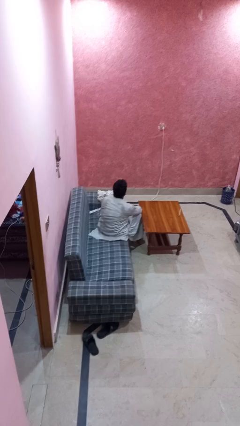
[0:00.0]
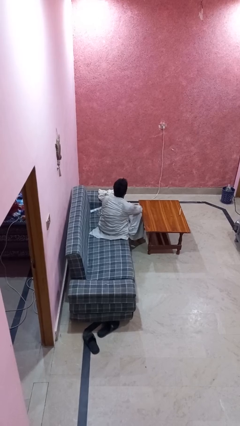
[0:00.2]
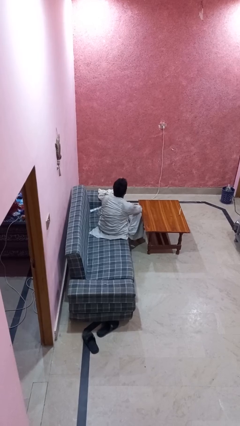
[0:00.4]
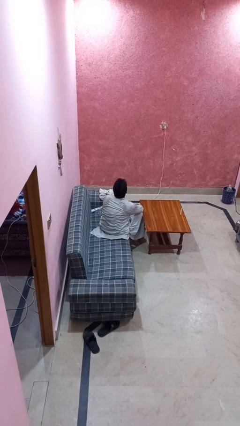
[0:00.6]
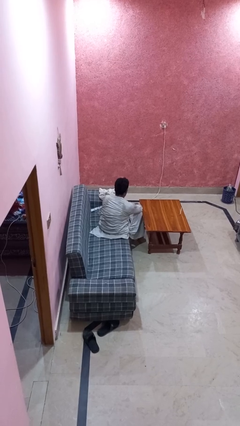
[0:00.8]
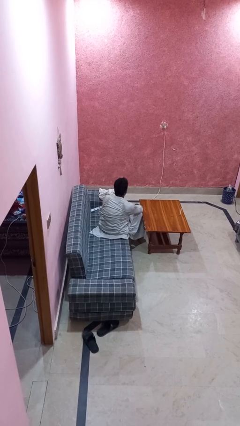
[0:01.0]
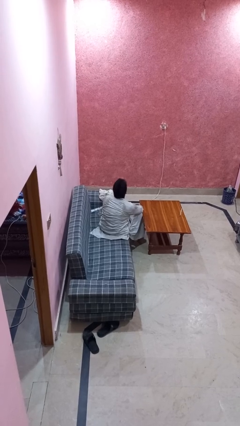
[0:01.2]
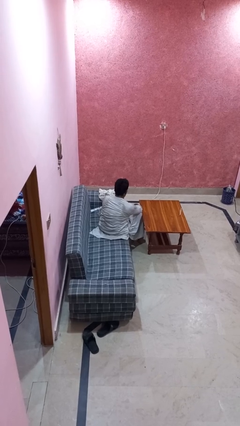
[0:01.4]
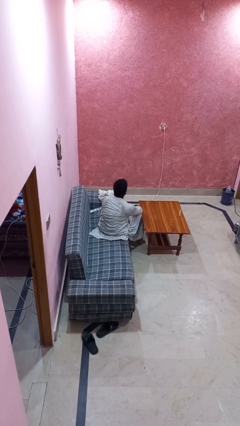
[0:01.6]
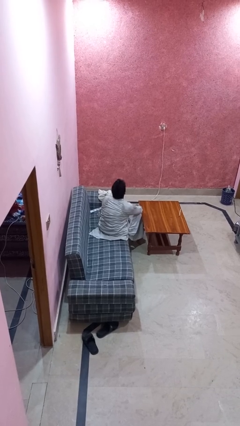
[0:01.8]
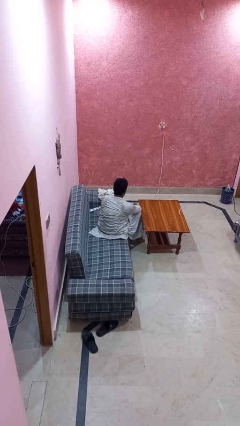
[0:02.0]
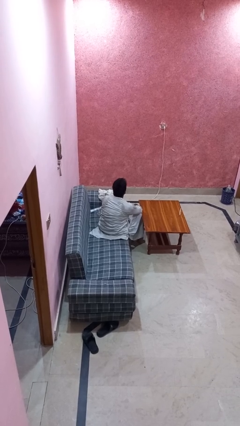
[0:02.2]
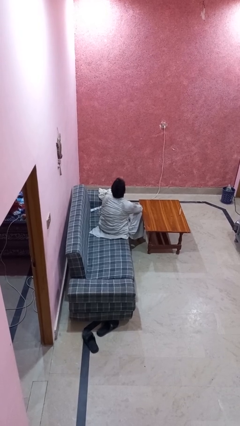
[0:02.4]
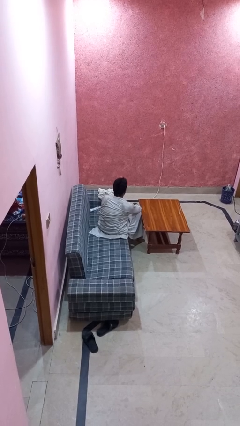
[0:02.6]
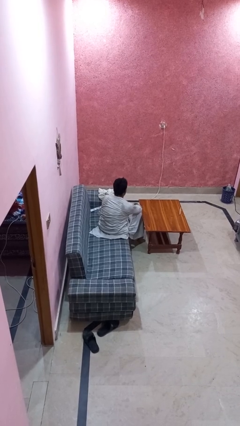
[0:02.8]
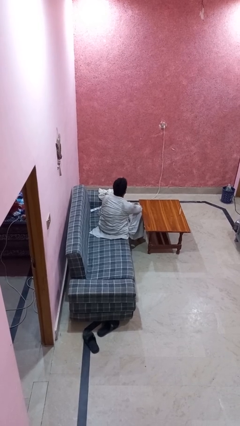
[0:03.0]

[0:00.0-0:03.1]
person nods head

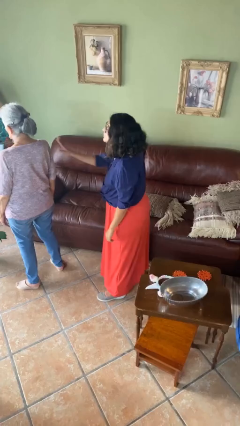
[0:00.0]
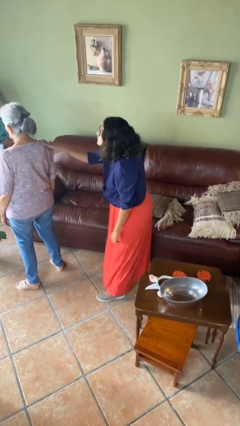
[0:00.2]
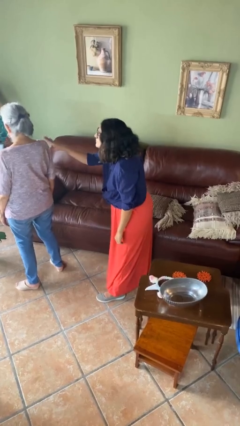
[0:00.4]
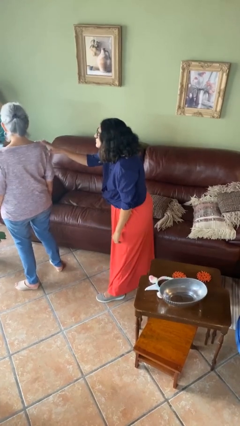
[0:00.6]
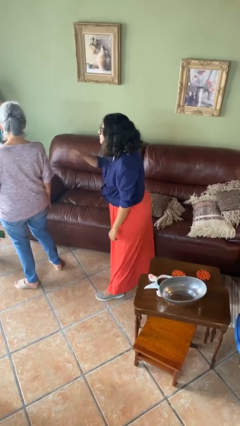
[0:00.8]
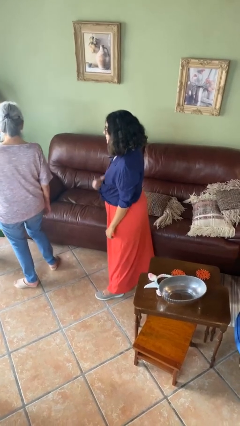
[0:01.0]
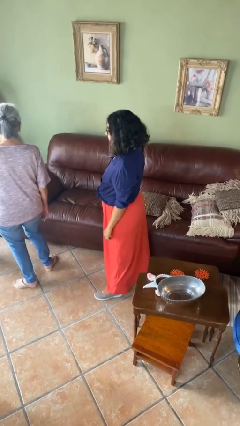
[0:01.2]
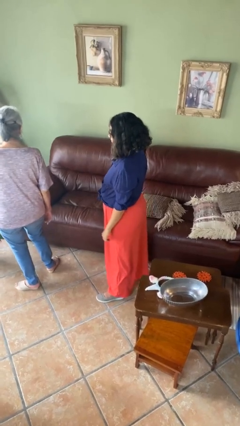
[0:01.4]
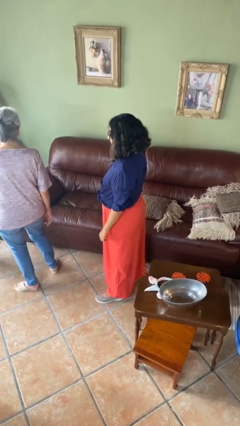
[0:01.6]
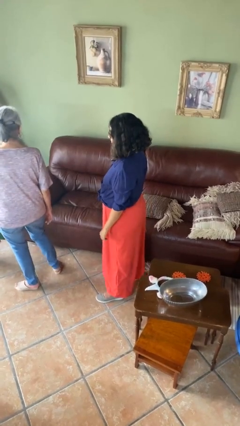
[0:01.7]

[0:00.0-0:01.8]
person touches back of person

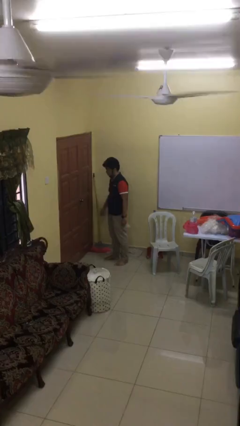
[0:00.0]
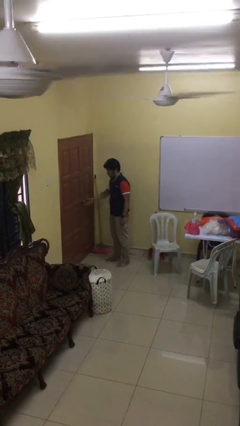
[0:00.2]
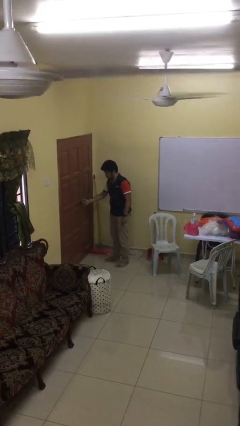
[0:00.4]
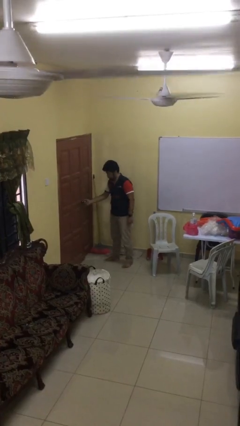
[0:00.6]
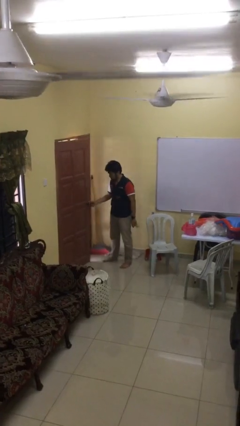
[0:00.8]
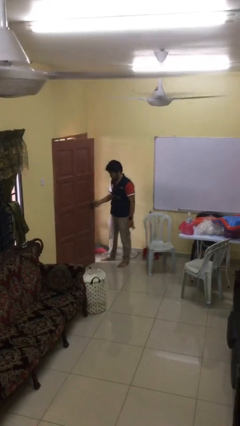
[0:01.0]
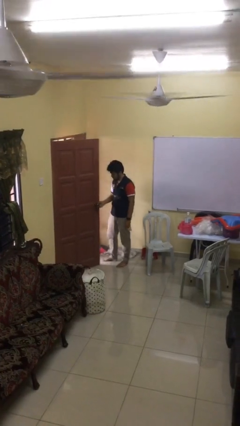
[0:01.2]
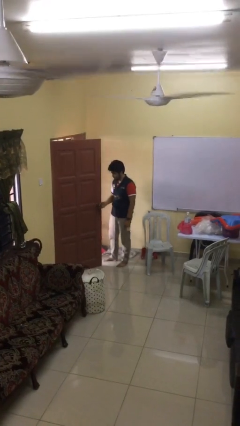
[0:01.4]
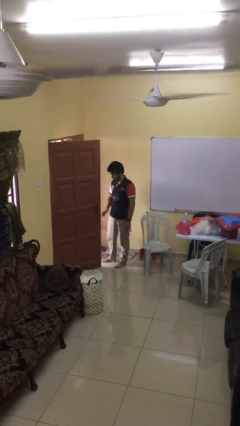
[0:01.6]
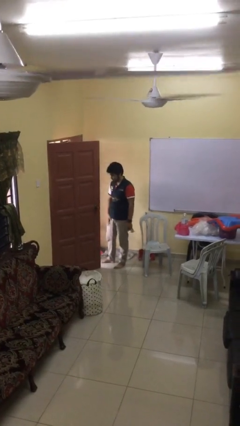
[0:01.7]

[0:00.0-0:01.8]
person opens facility door

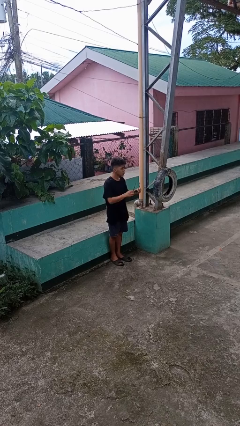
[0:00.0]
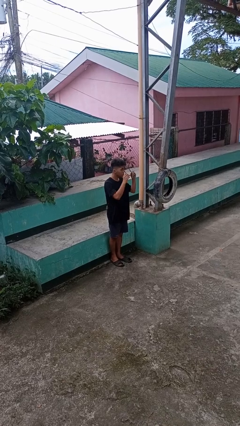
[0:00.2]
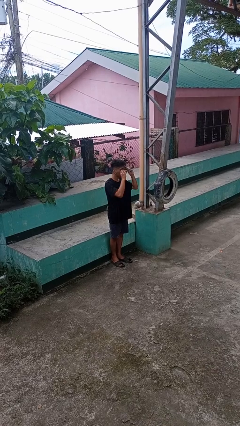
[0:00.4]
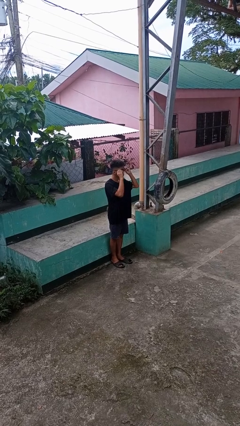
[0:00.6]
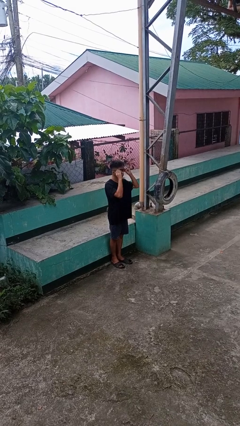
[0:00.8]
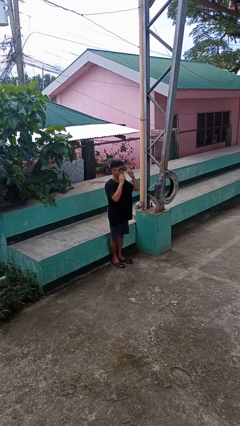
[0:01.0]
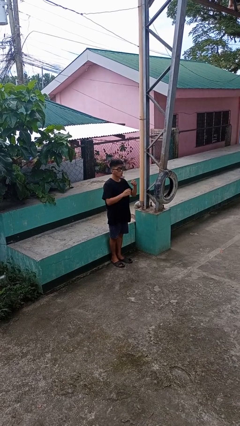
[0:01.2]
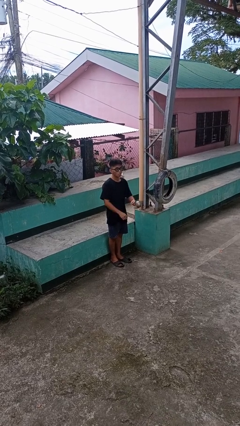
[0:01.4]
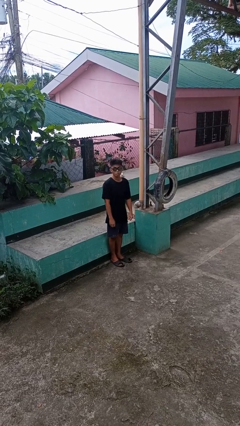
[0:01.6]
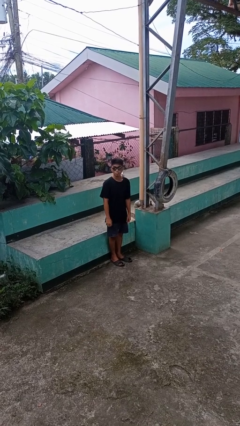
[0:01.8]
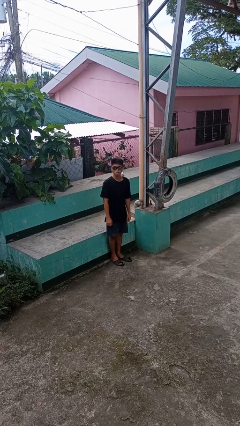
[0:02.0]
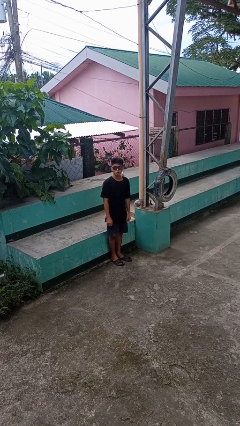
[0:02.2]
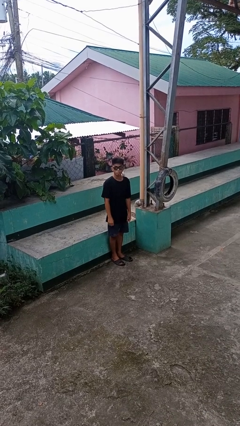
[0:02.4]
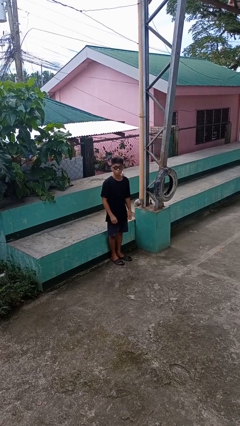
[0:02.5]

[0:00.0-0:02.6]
person puts on sunglasses

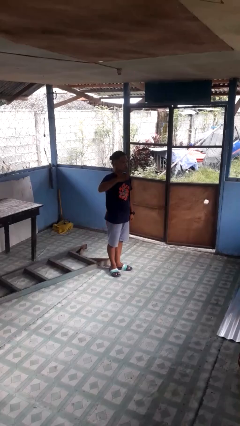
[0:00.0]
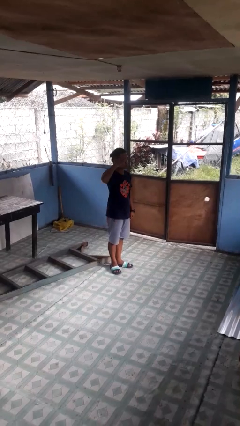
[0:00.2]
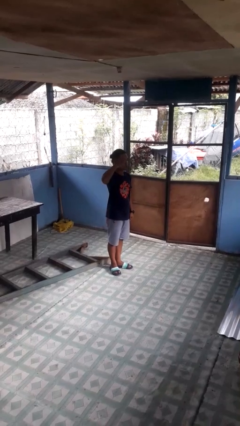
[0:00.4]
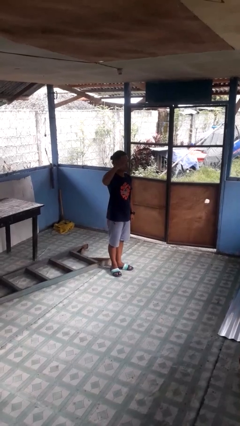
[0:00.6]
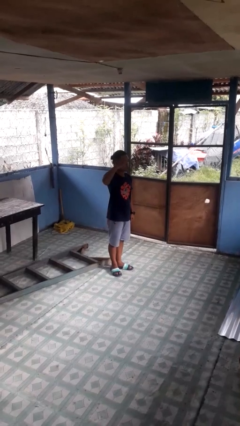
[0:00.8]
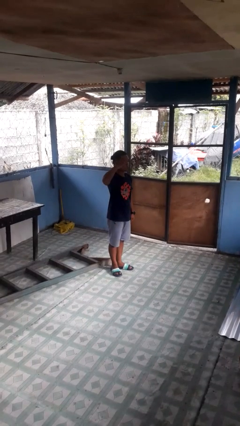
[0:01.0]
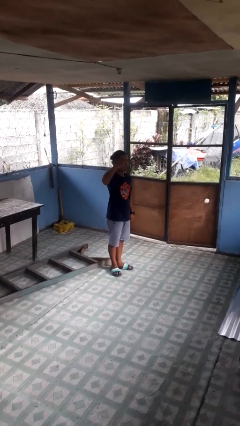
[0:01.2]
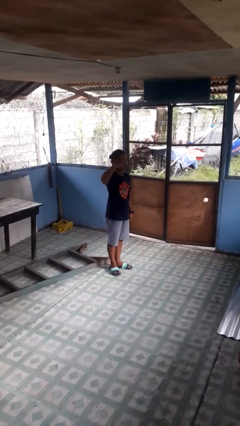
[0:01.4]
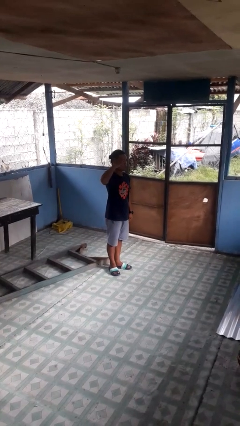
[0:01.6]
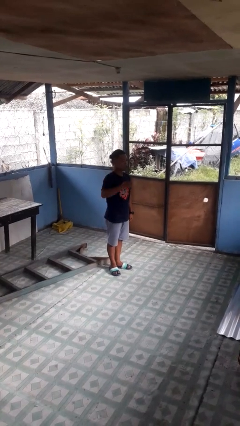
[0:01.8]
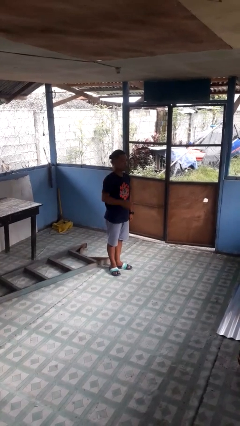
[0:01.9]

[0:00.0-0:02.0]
person salutes

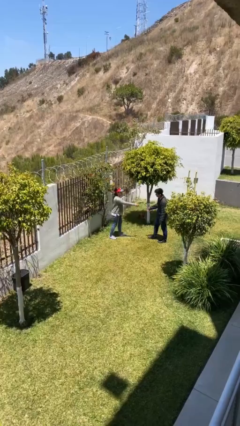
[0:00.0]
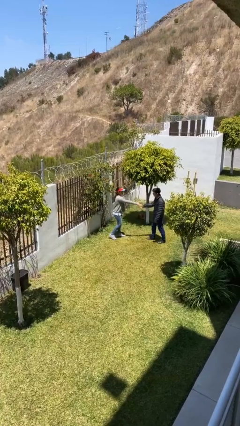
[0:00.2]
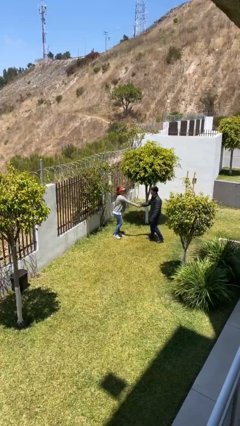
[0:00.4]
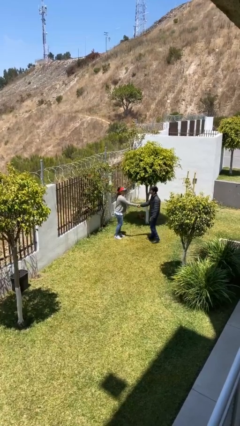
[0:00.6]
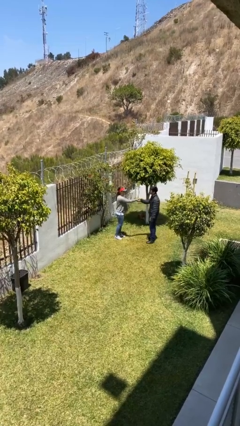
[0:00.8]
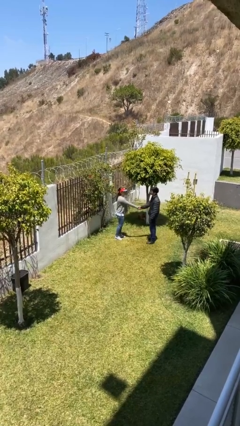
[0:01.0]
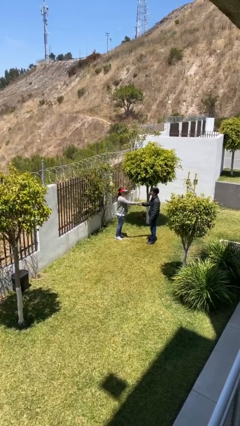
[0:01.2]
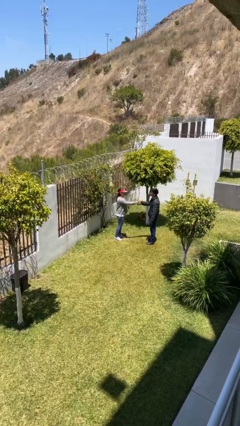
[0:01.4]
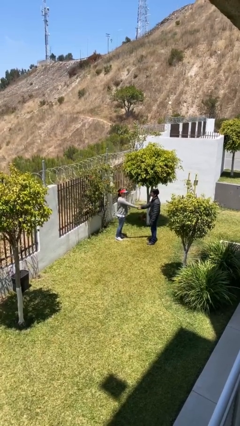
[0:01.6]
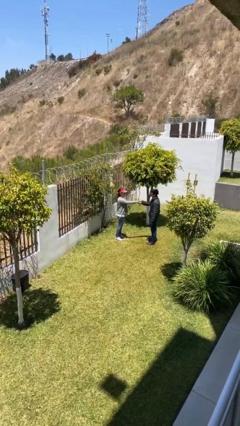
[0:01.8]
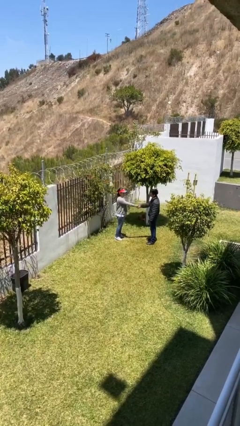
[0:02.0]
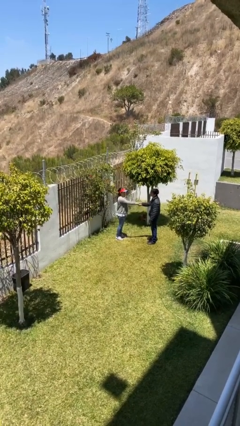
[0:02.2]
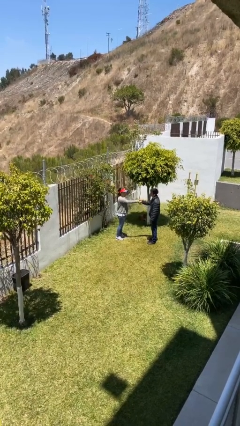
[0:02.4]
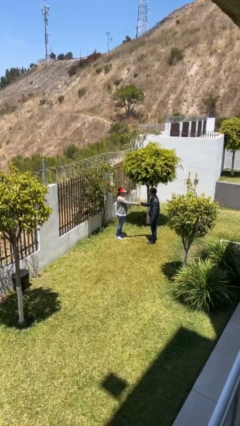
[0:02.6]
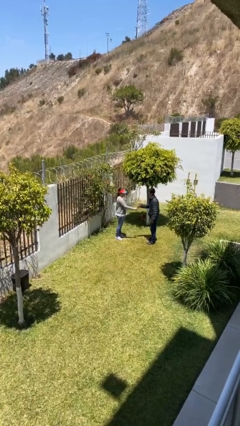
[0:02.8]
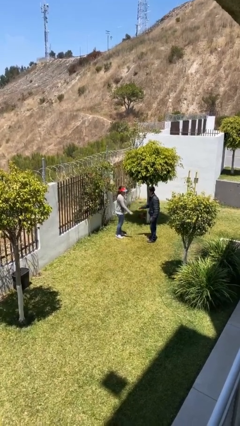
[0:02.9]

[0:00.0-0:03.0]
person shakes hand

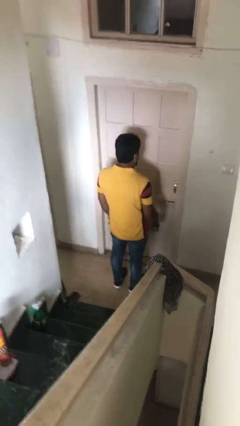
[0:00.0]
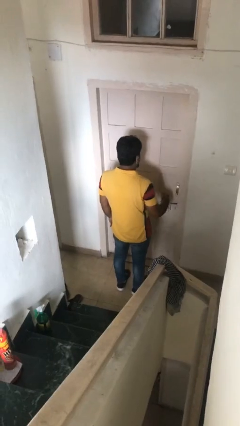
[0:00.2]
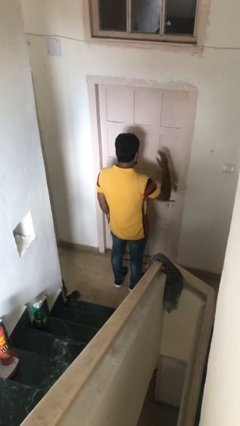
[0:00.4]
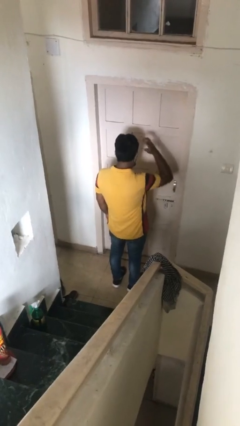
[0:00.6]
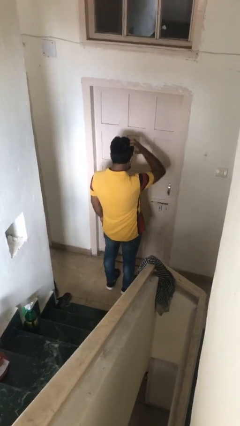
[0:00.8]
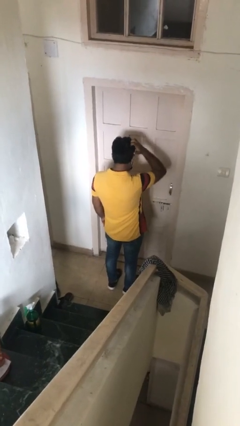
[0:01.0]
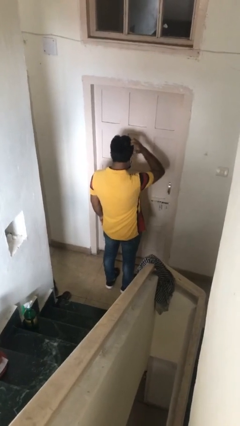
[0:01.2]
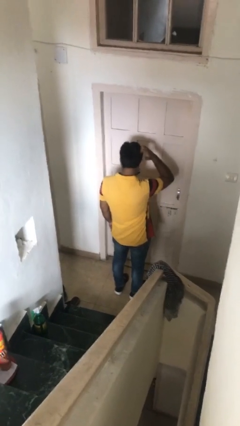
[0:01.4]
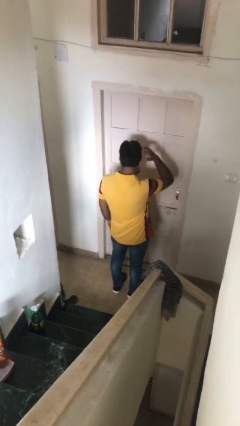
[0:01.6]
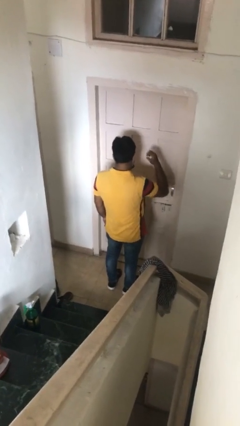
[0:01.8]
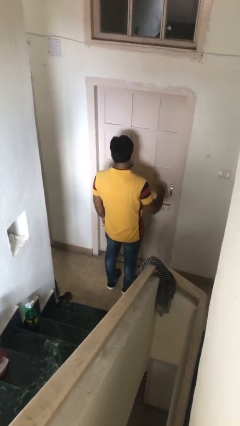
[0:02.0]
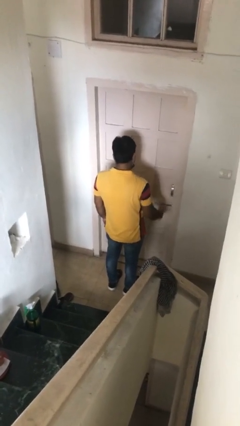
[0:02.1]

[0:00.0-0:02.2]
person scratches face

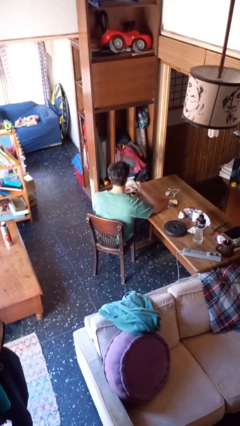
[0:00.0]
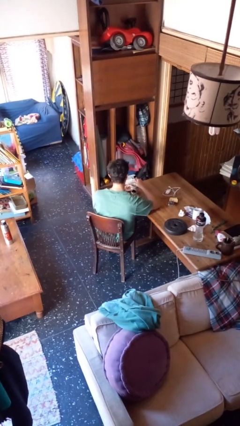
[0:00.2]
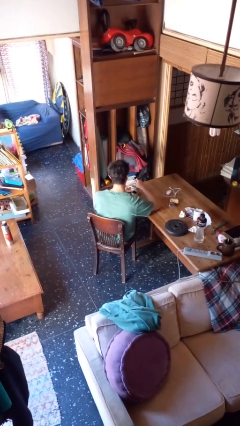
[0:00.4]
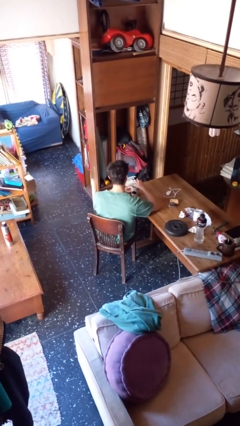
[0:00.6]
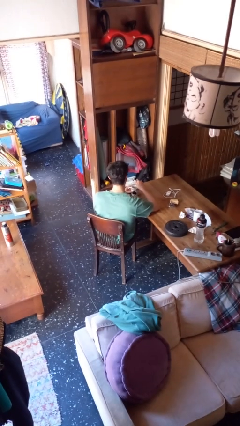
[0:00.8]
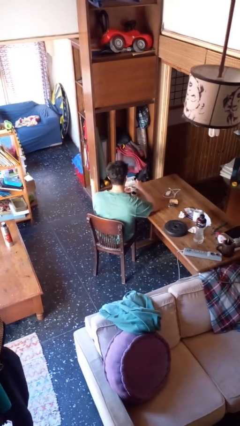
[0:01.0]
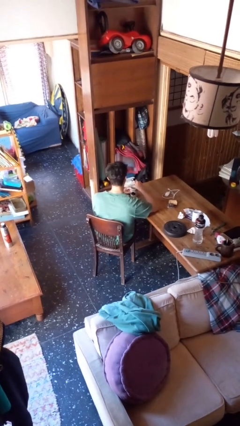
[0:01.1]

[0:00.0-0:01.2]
person stirs mug
